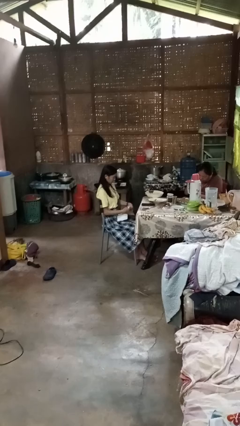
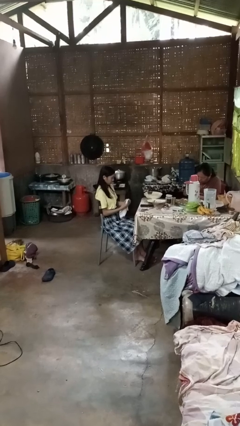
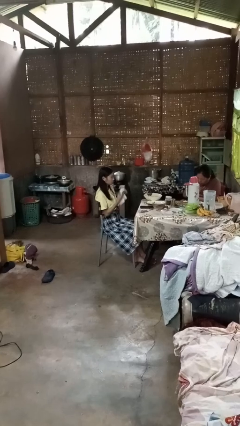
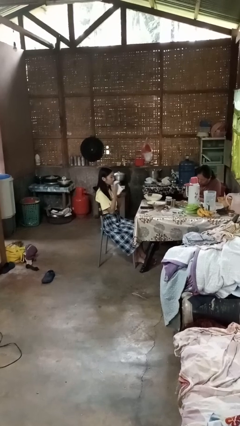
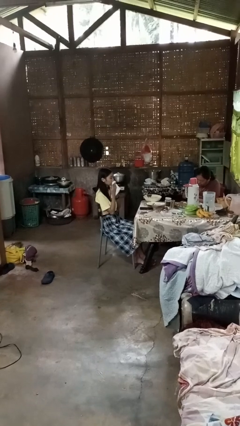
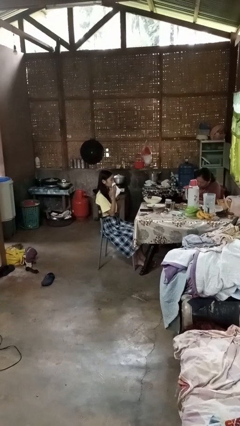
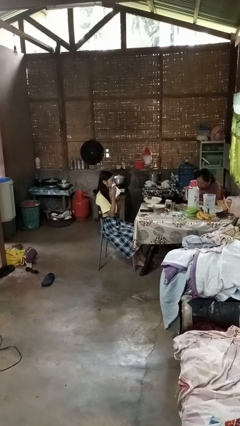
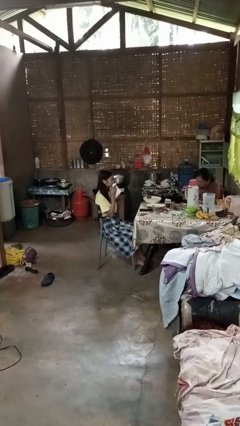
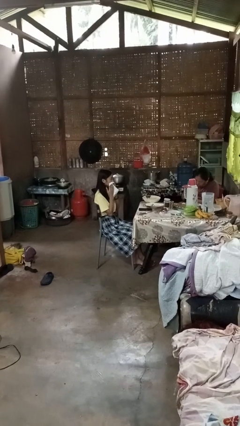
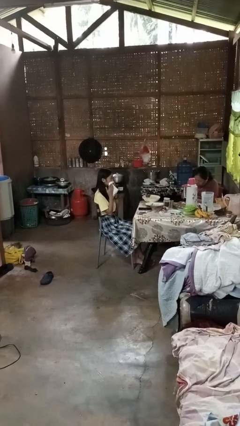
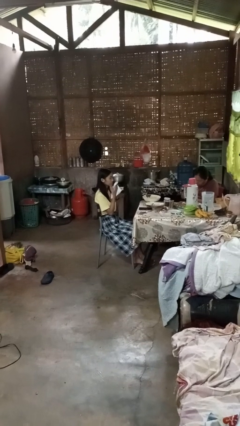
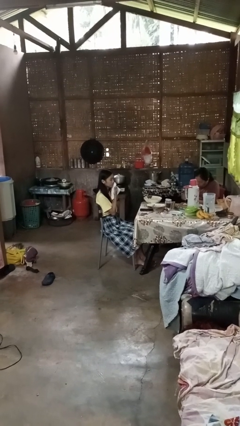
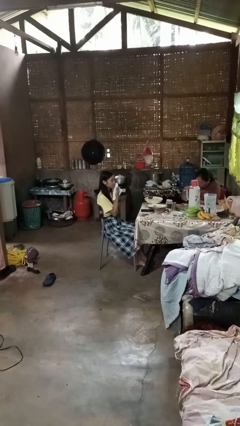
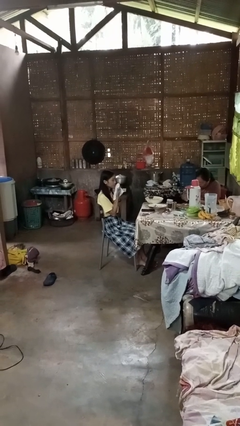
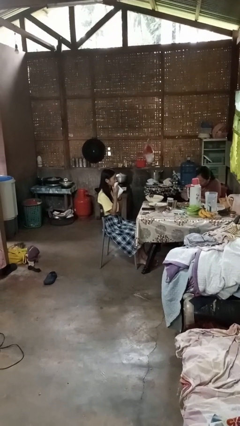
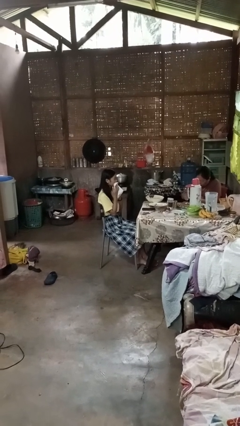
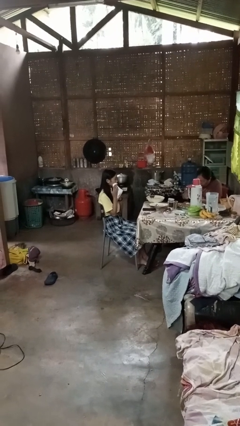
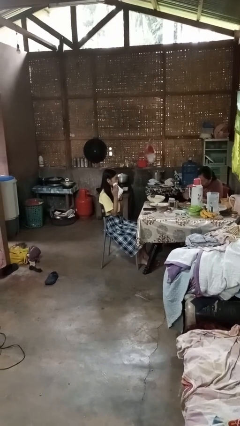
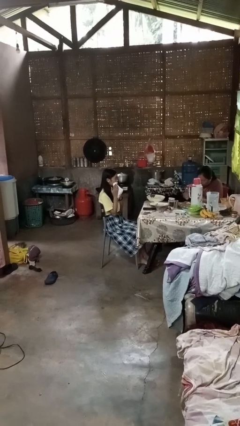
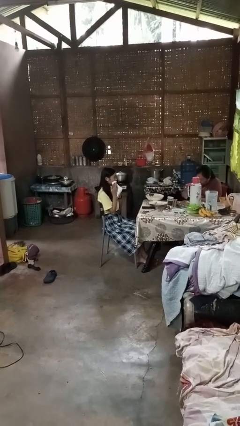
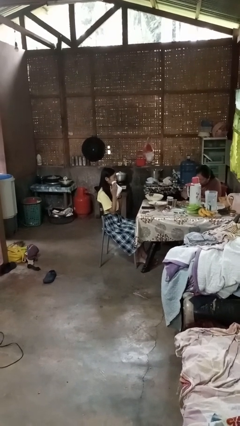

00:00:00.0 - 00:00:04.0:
person wipes mouth with napkin

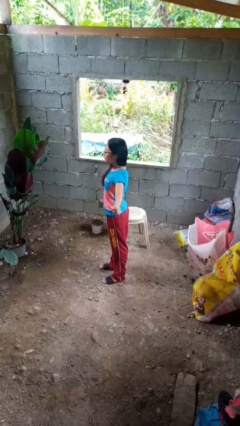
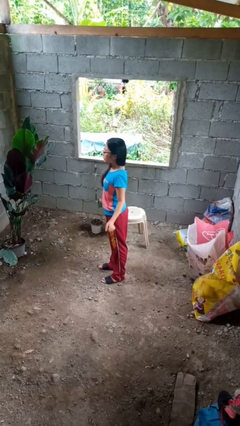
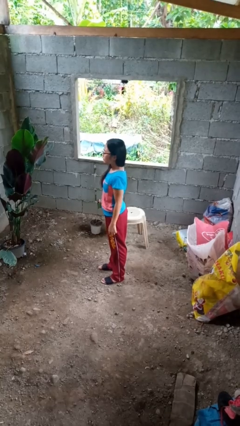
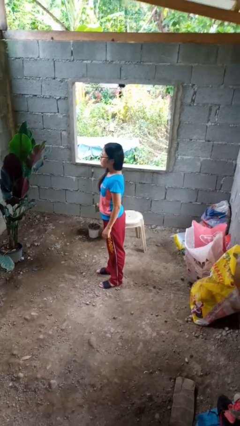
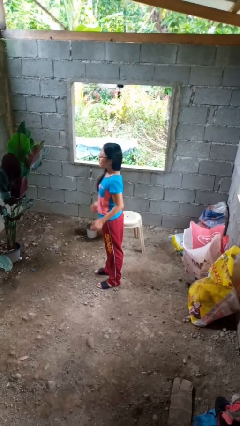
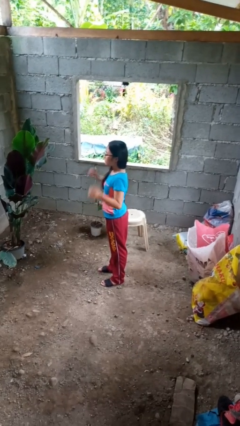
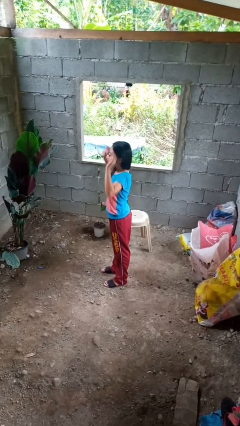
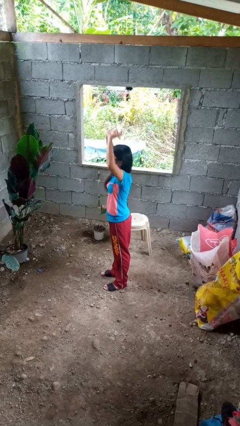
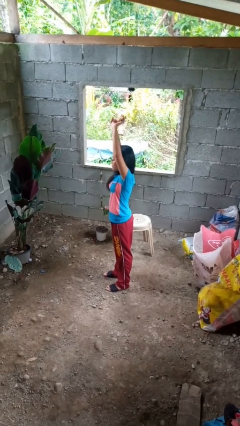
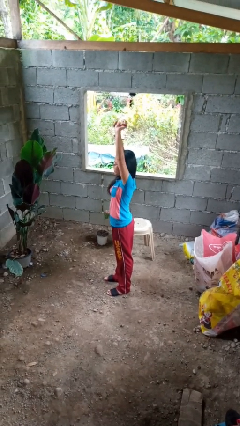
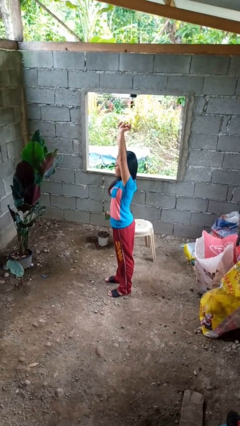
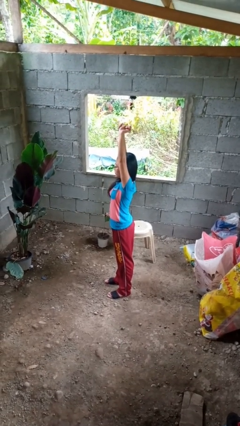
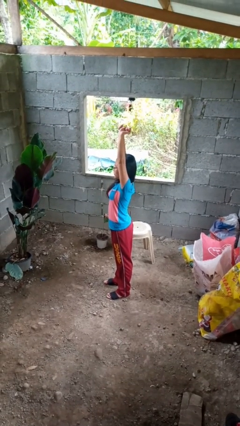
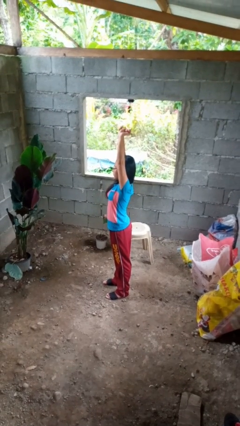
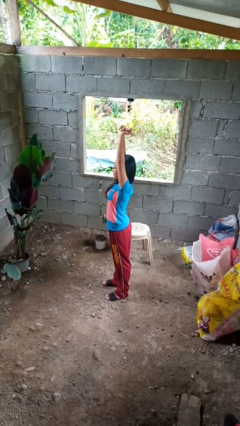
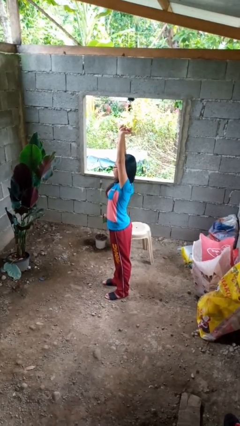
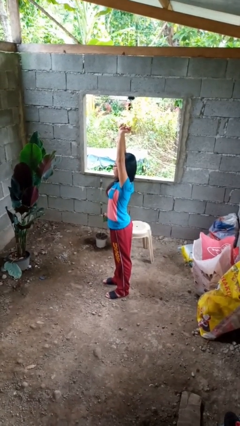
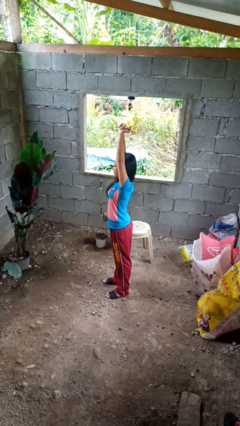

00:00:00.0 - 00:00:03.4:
person stretches arms over head

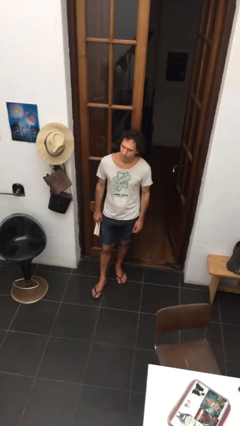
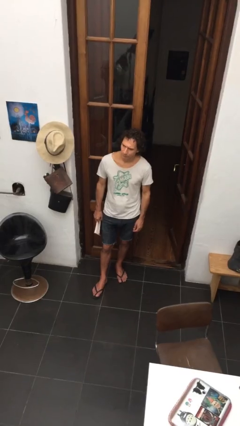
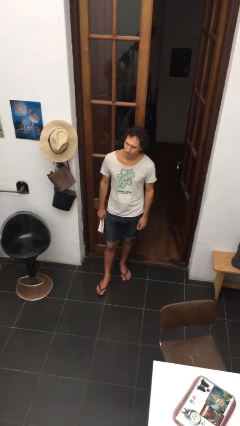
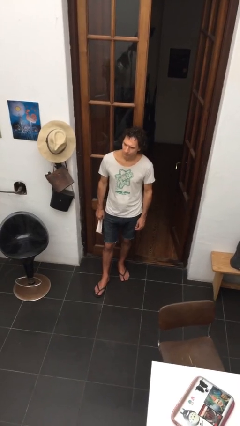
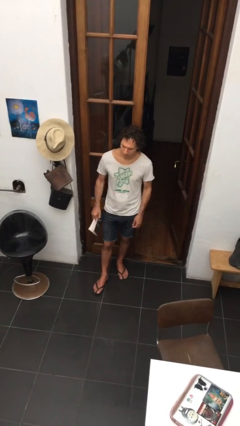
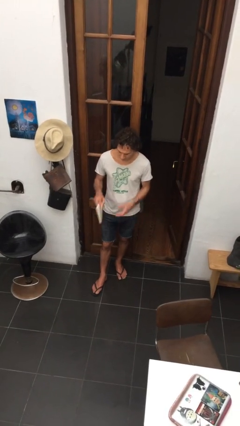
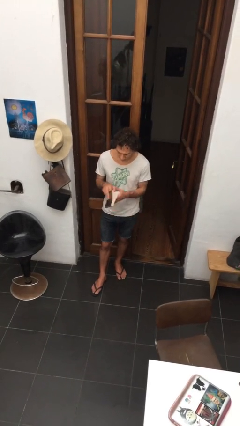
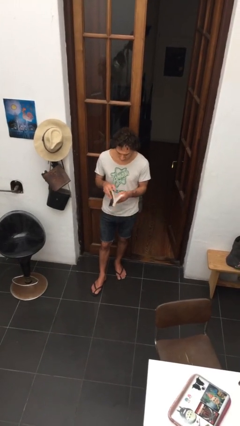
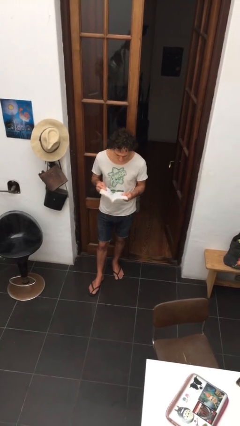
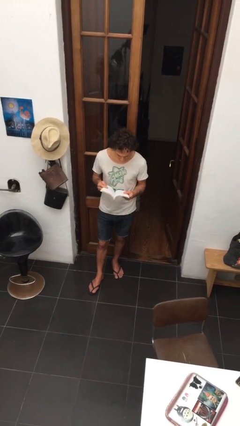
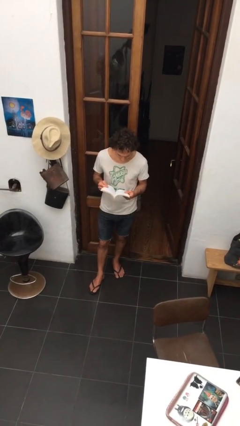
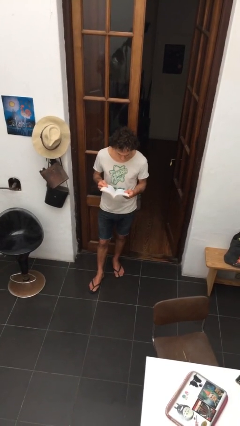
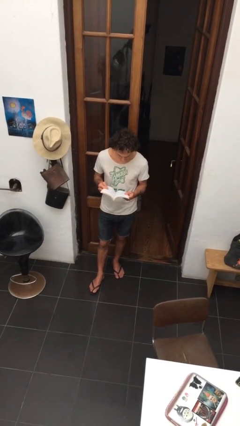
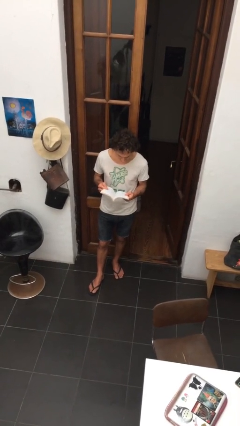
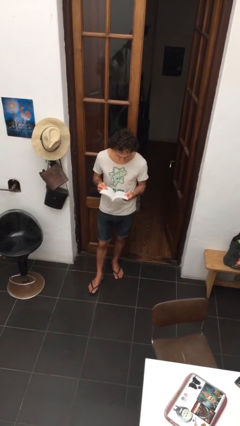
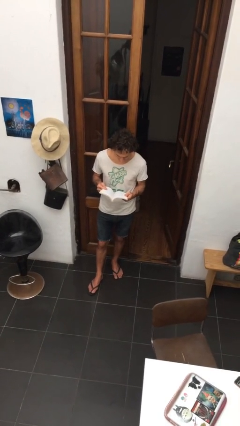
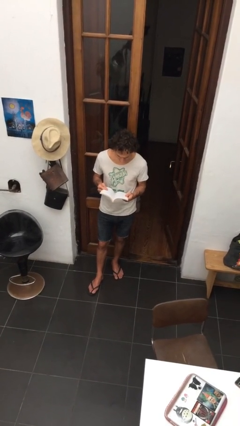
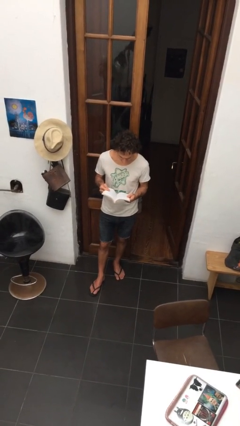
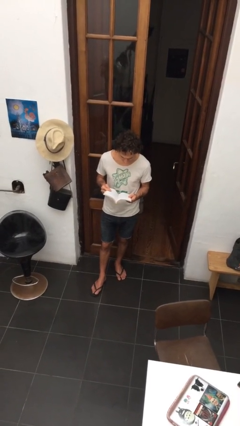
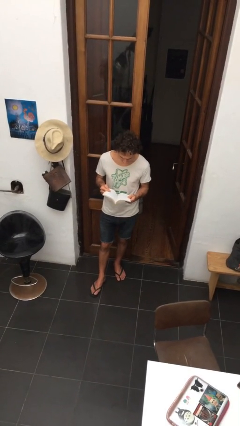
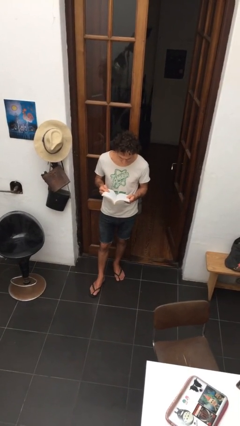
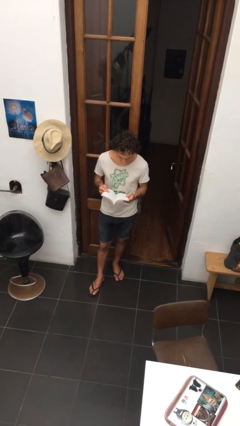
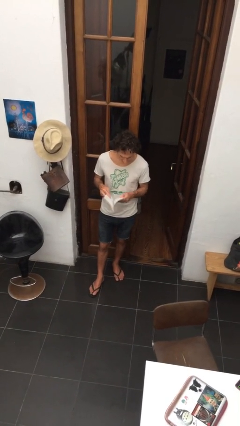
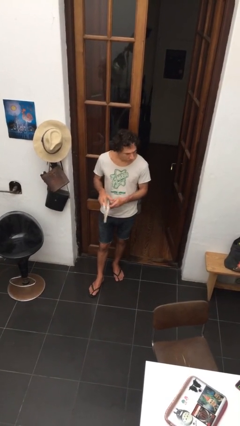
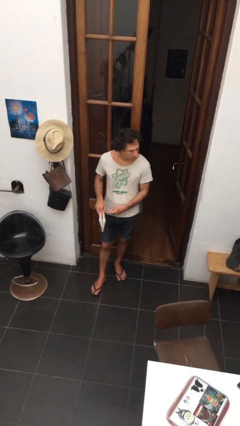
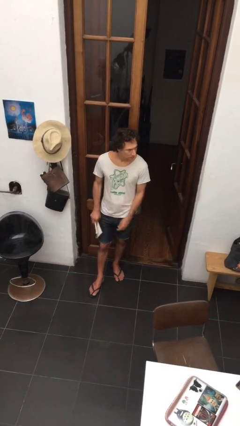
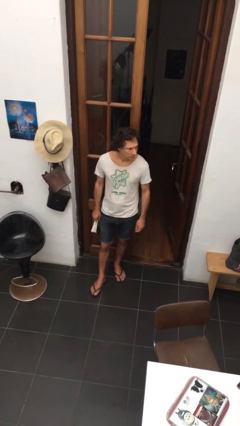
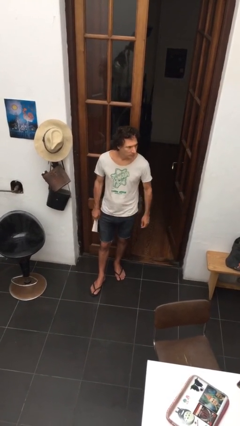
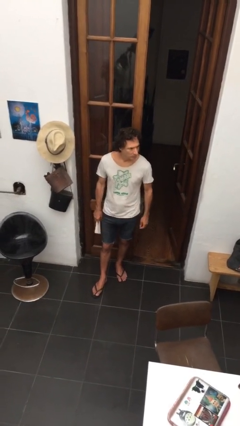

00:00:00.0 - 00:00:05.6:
person reads document

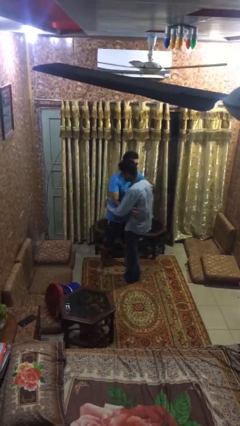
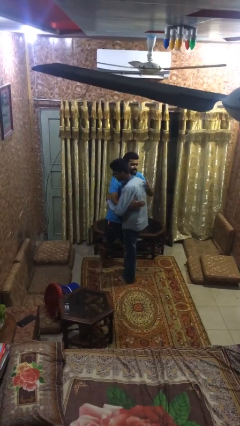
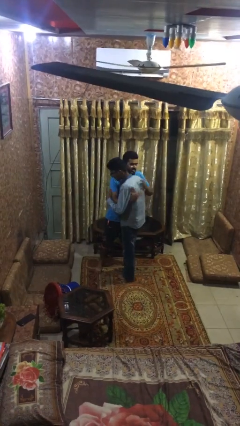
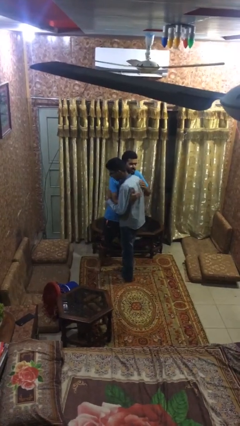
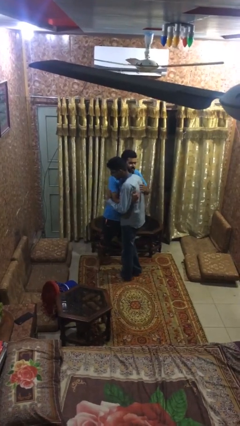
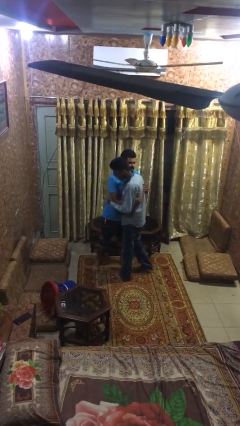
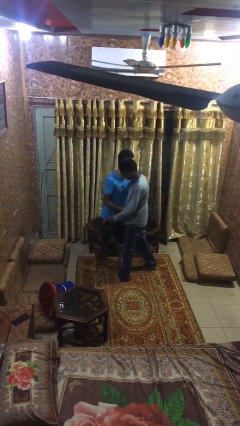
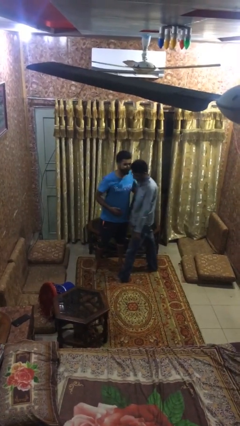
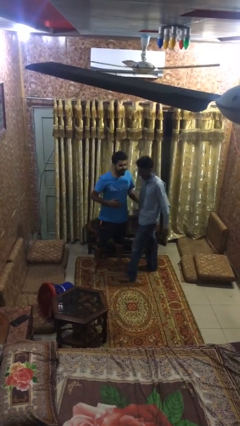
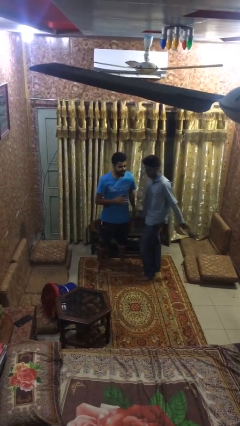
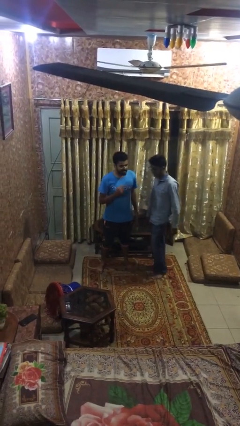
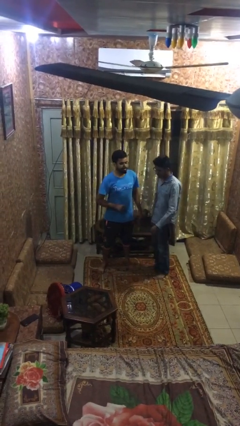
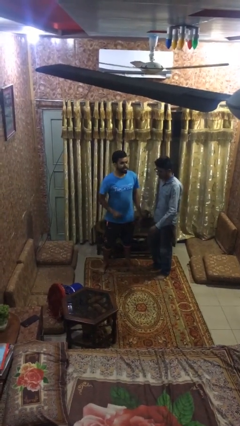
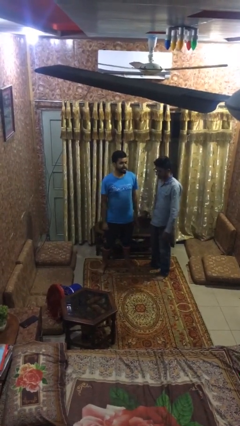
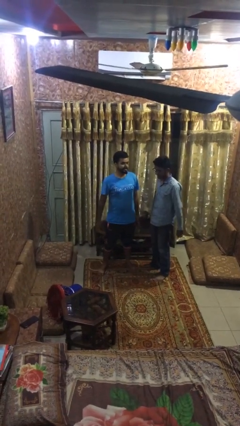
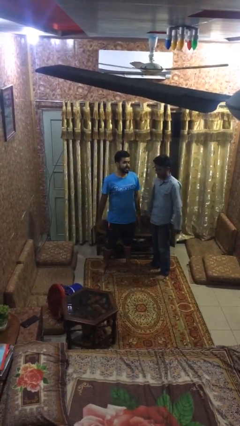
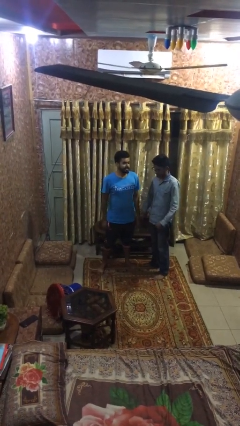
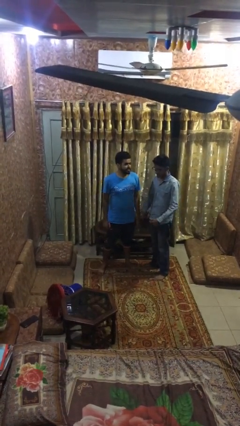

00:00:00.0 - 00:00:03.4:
person embraces person

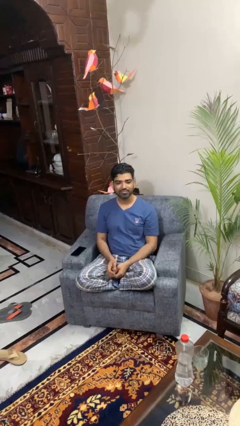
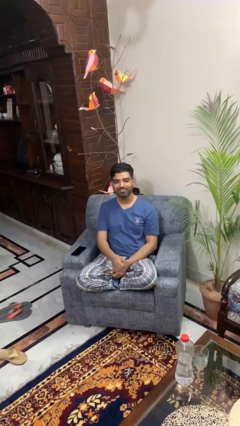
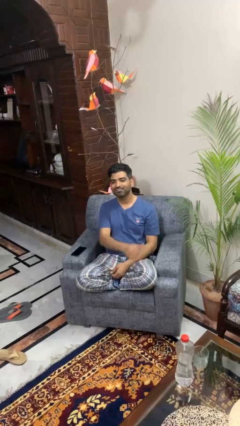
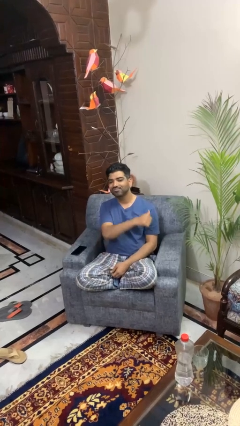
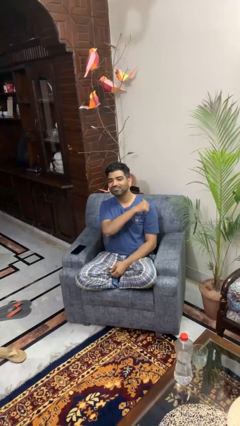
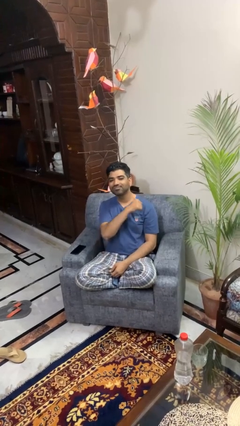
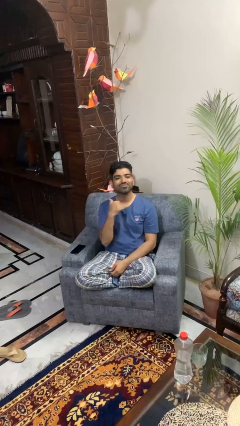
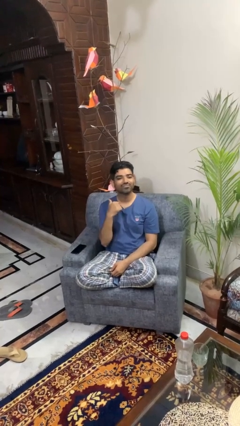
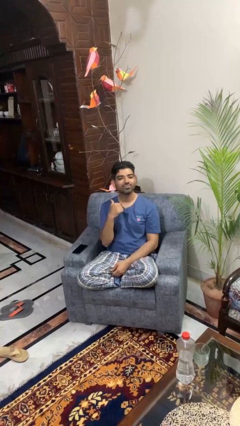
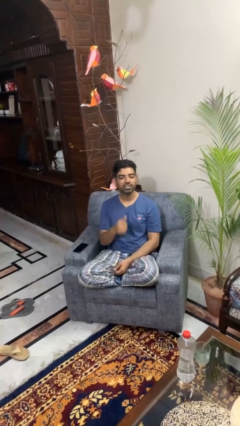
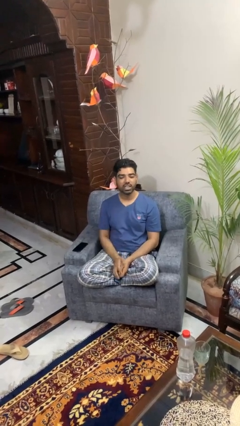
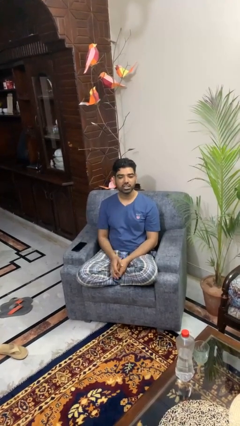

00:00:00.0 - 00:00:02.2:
person gestures cut
